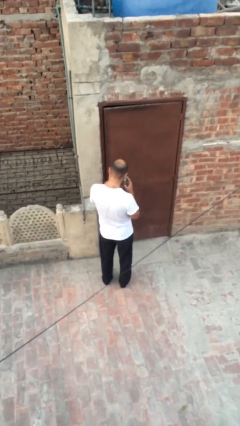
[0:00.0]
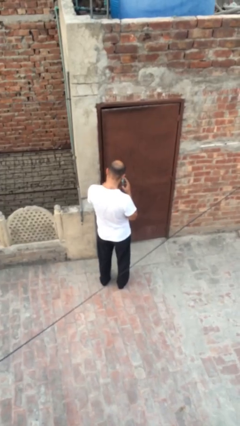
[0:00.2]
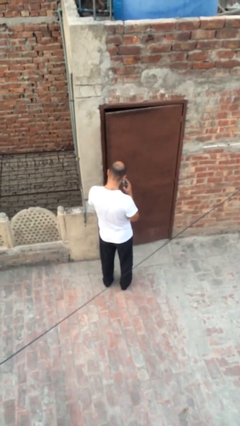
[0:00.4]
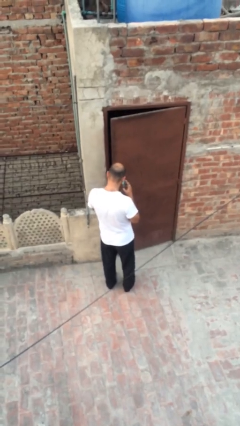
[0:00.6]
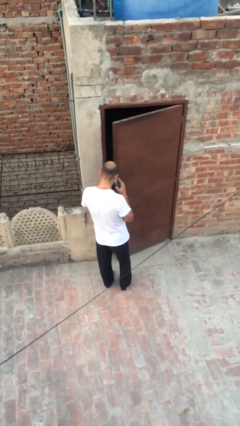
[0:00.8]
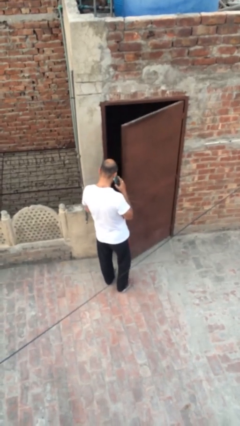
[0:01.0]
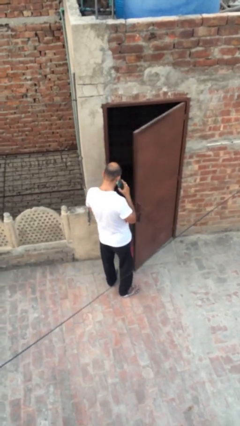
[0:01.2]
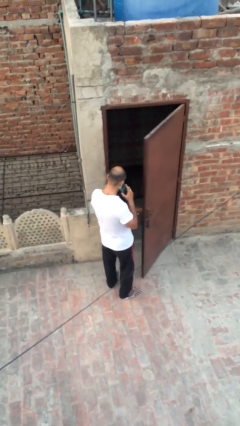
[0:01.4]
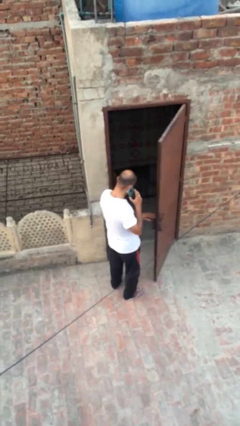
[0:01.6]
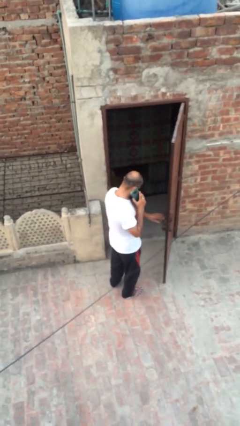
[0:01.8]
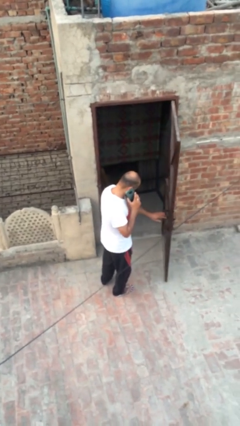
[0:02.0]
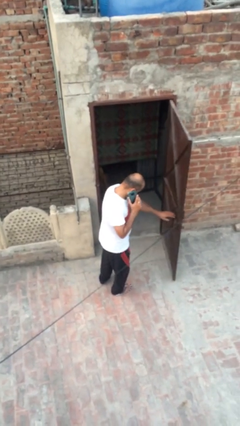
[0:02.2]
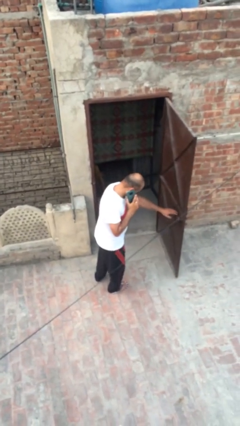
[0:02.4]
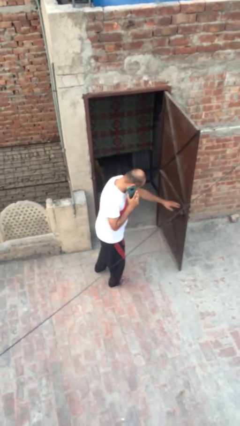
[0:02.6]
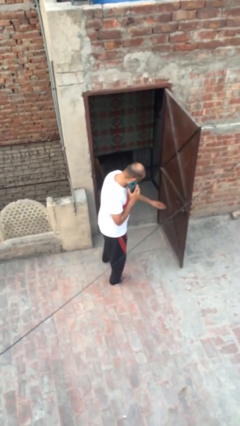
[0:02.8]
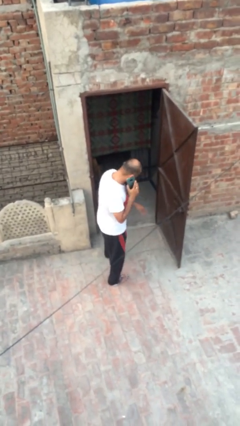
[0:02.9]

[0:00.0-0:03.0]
person opens facility door

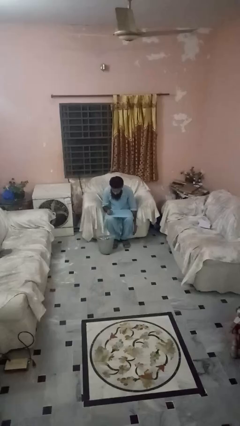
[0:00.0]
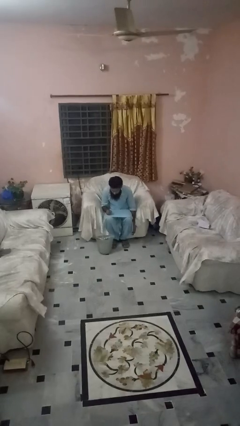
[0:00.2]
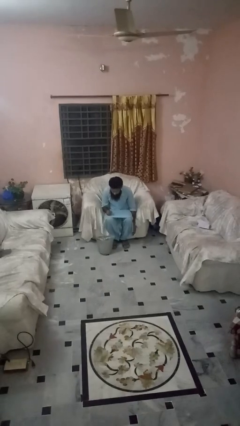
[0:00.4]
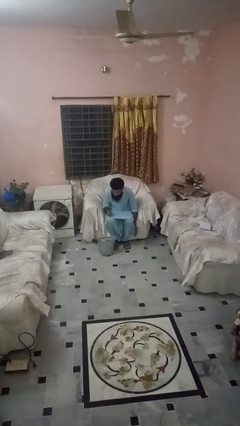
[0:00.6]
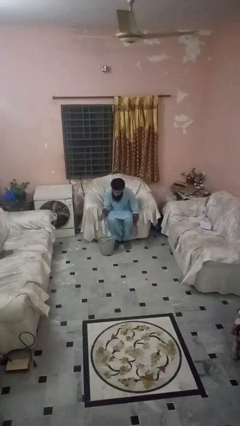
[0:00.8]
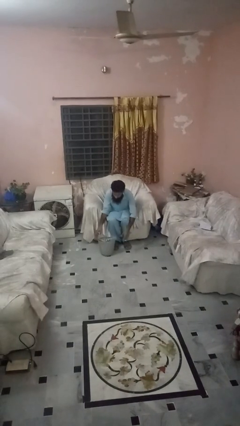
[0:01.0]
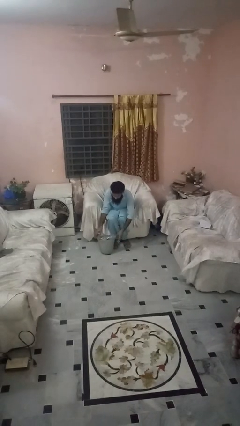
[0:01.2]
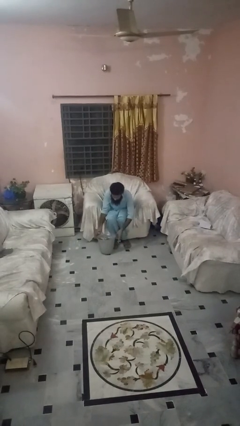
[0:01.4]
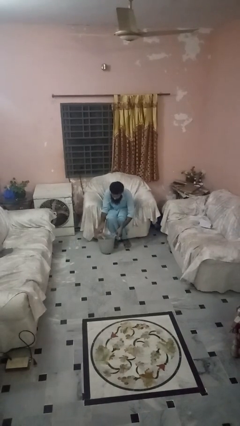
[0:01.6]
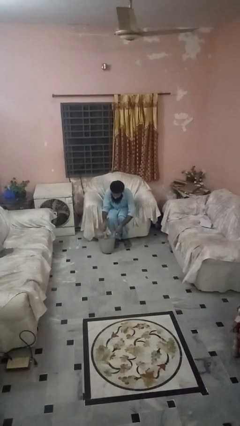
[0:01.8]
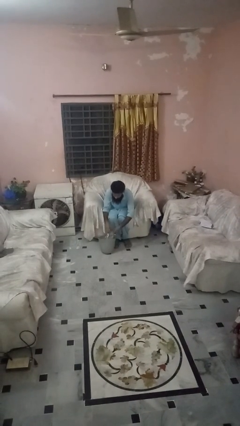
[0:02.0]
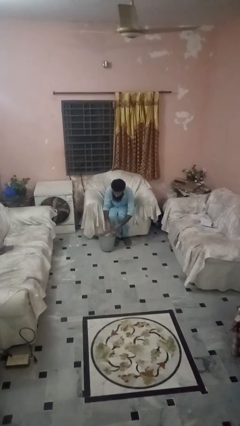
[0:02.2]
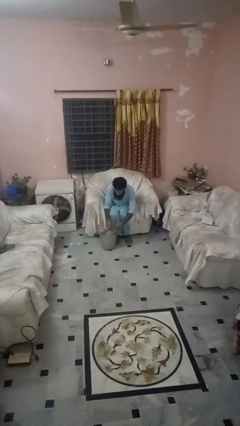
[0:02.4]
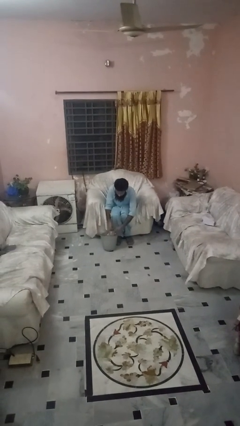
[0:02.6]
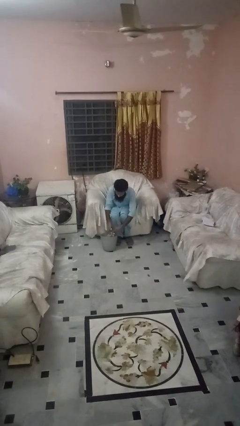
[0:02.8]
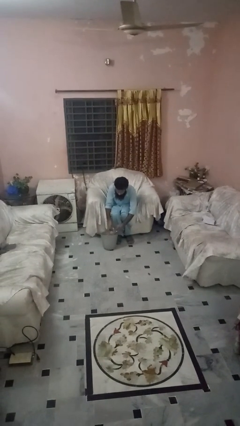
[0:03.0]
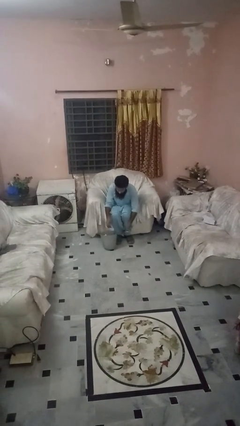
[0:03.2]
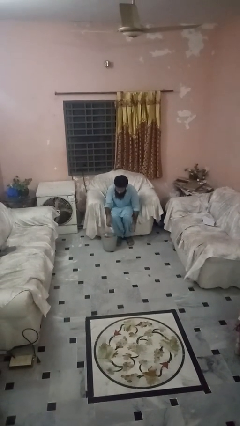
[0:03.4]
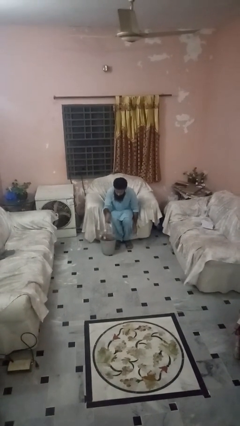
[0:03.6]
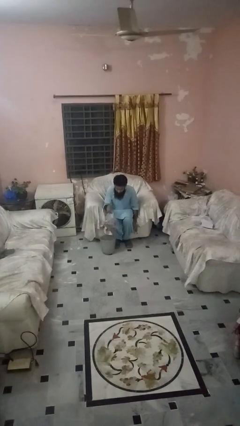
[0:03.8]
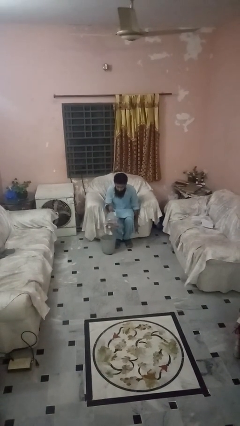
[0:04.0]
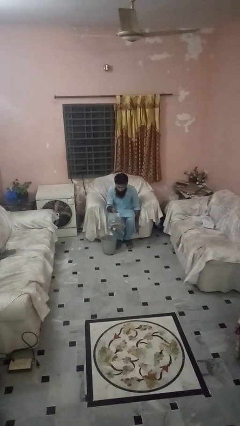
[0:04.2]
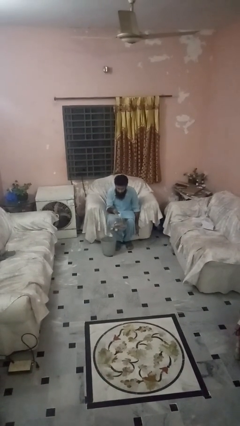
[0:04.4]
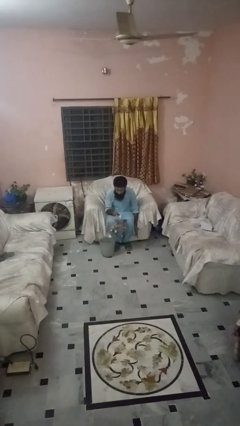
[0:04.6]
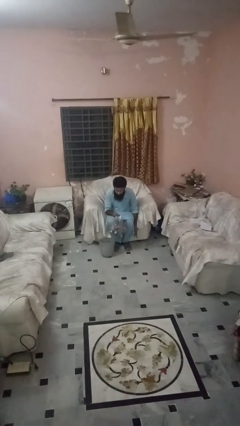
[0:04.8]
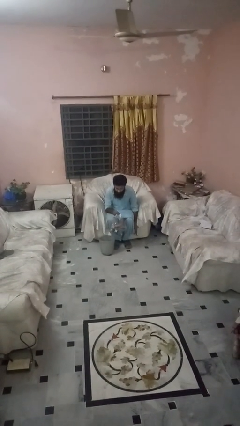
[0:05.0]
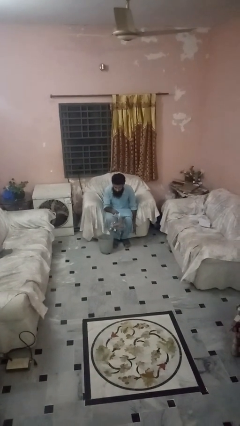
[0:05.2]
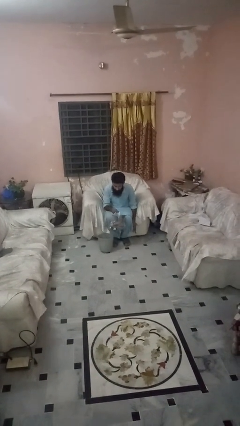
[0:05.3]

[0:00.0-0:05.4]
person removes trashbag from trashcan

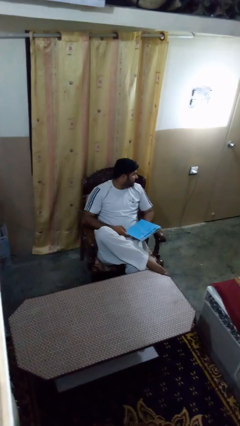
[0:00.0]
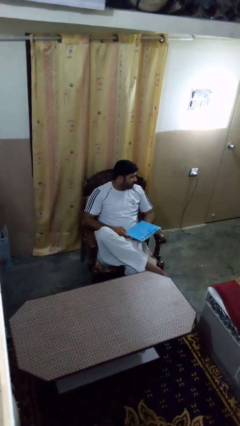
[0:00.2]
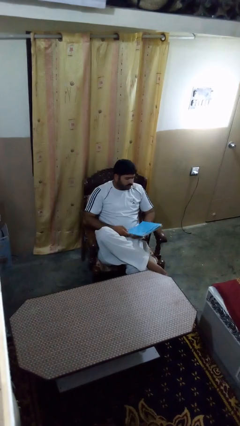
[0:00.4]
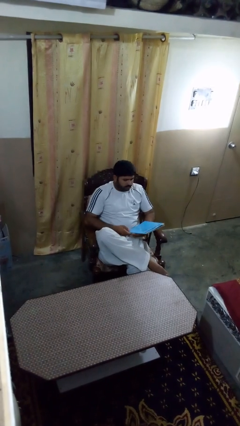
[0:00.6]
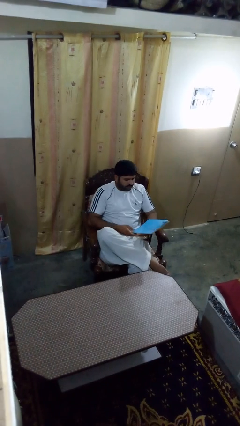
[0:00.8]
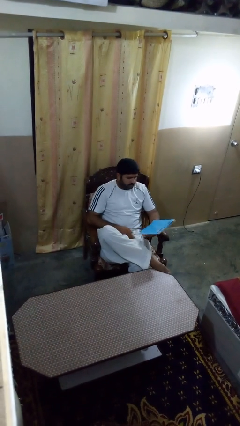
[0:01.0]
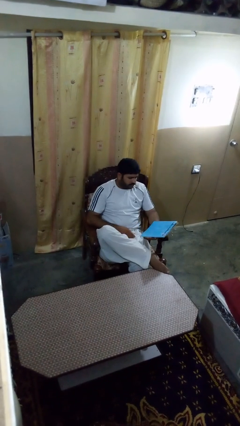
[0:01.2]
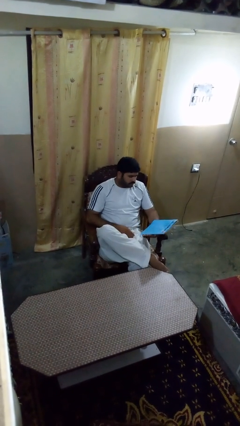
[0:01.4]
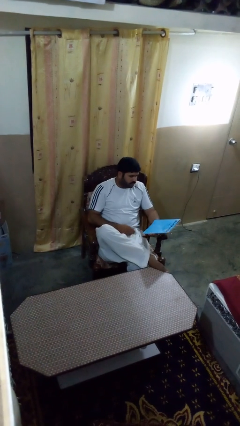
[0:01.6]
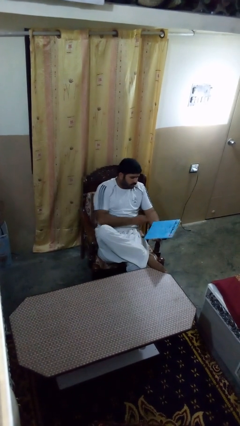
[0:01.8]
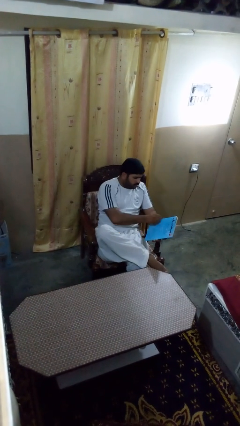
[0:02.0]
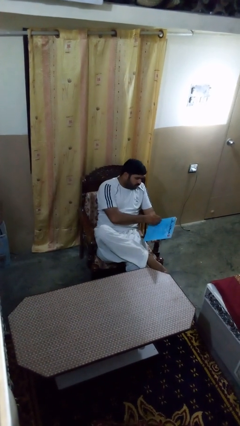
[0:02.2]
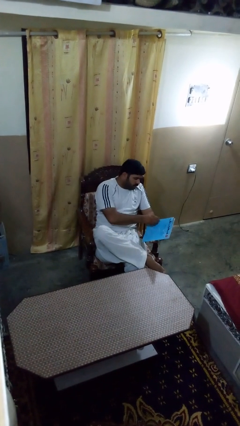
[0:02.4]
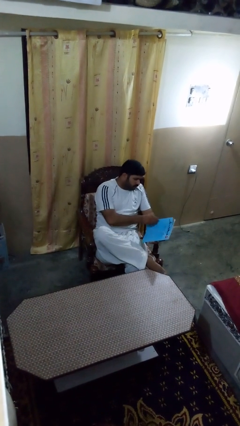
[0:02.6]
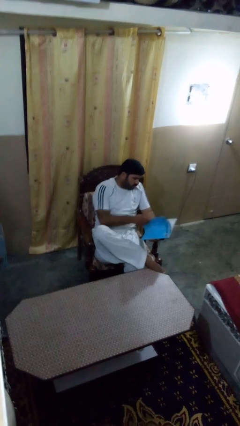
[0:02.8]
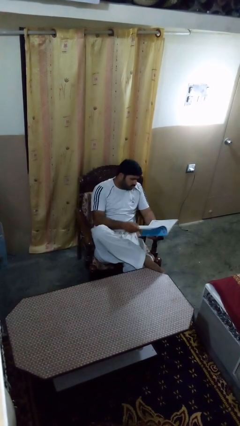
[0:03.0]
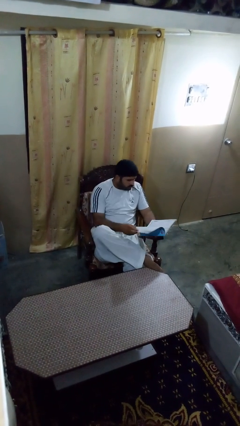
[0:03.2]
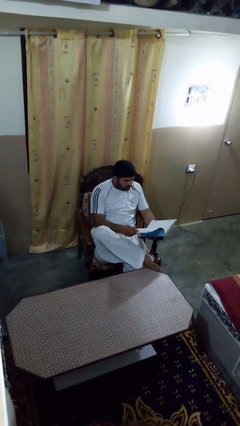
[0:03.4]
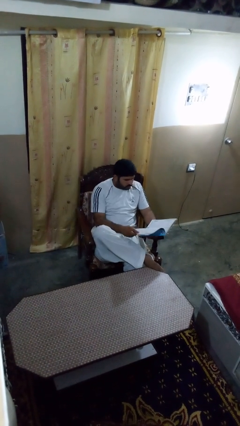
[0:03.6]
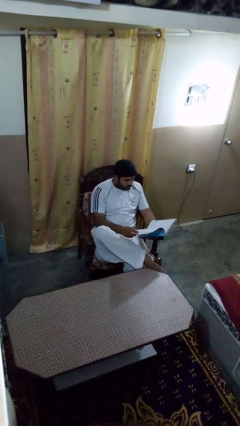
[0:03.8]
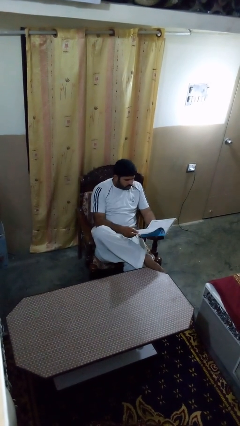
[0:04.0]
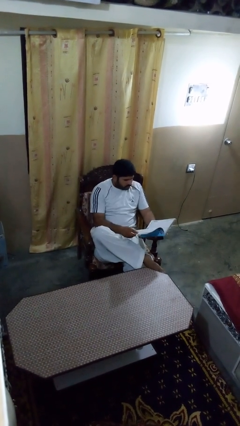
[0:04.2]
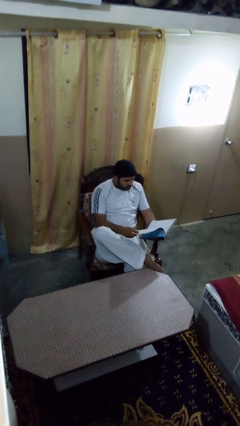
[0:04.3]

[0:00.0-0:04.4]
person reads magazine

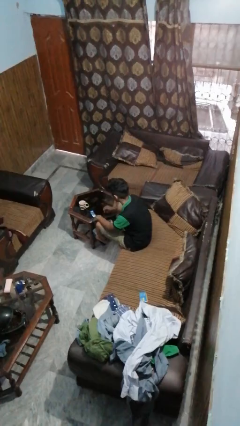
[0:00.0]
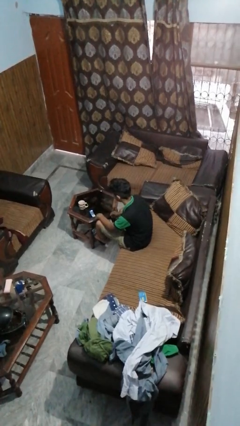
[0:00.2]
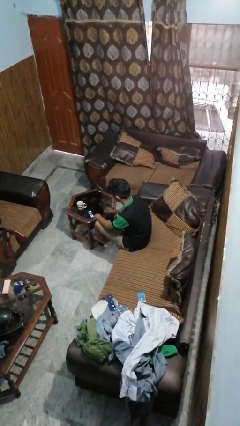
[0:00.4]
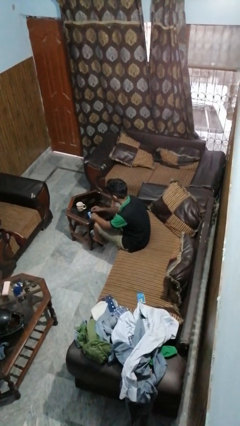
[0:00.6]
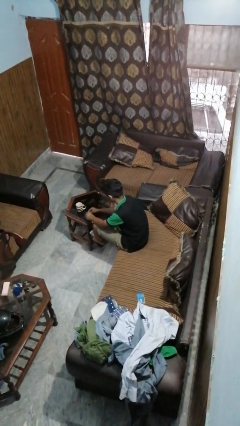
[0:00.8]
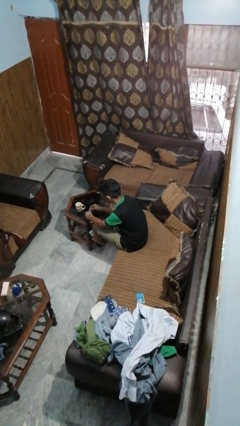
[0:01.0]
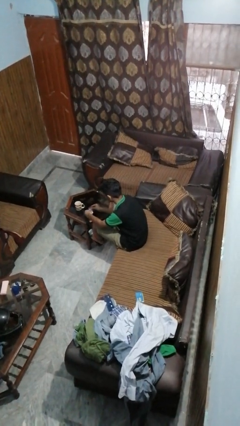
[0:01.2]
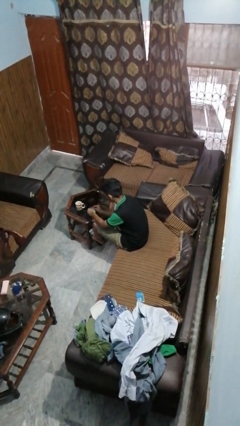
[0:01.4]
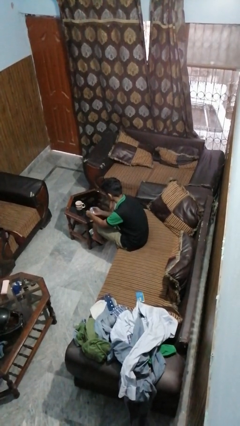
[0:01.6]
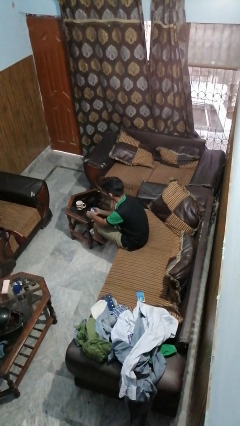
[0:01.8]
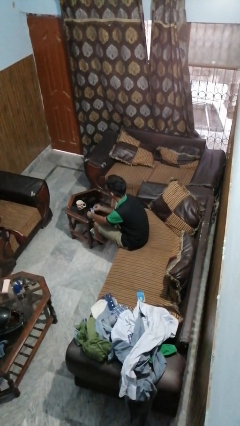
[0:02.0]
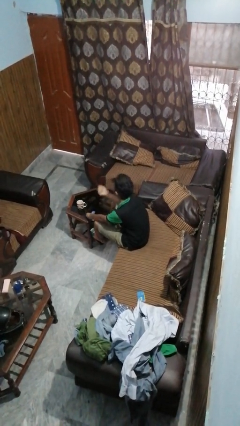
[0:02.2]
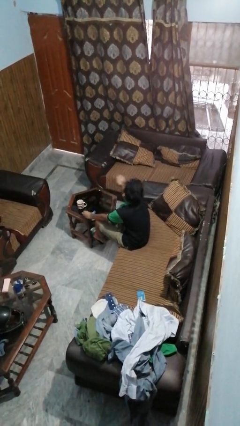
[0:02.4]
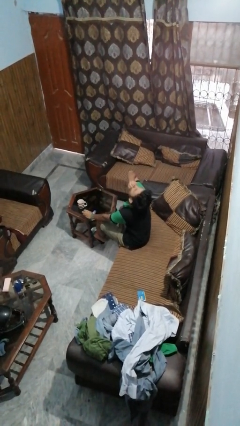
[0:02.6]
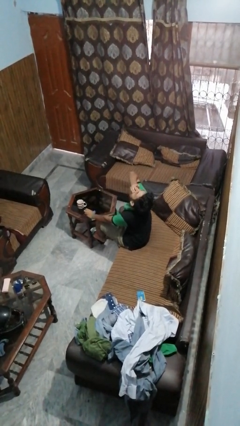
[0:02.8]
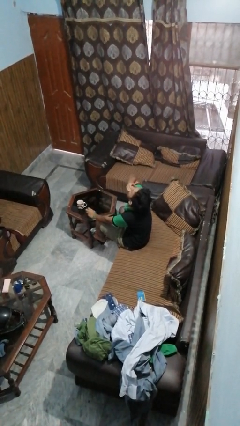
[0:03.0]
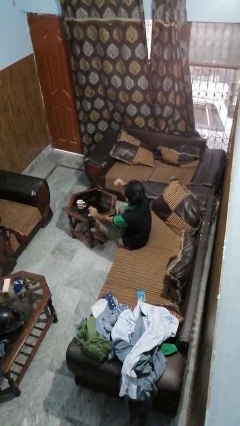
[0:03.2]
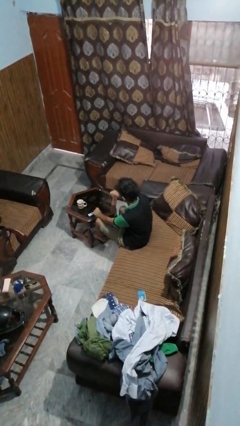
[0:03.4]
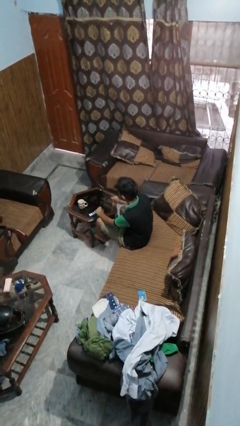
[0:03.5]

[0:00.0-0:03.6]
person takes medicine pills

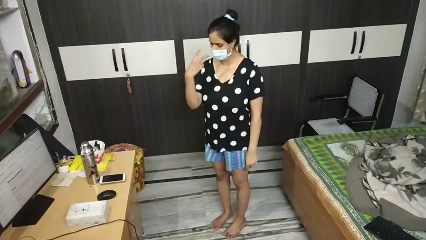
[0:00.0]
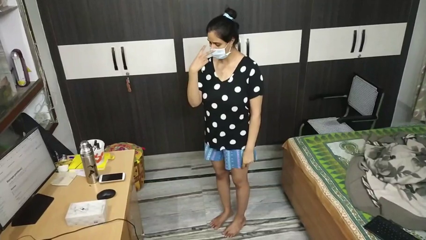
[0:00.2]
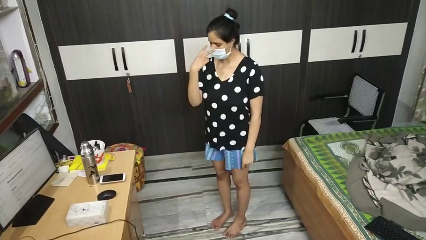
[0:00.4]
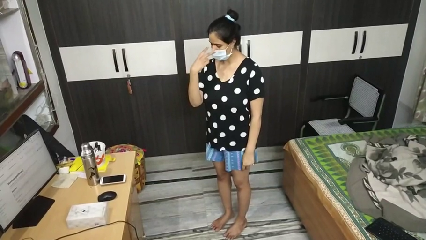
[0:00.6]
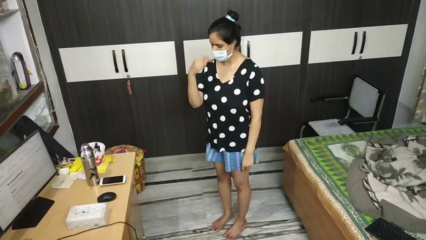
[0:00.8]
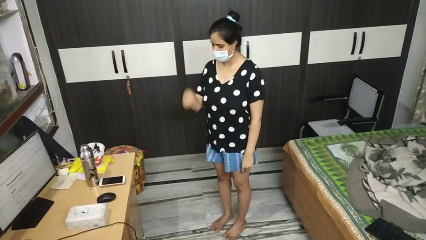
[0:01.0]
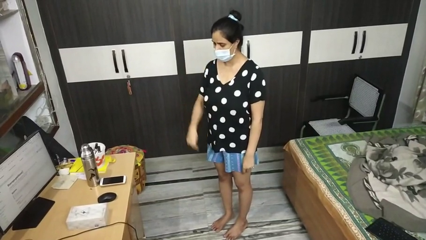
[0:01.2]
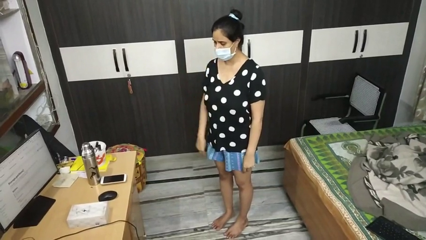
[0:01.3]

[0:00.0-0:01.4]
person gestures watch closely
